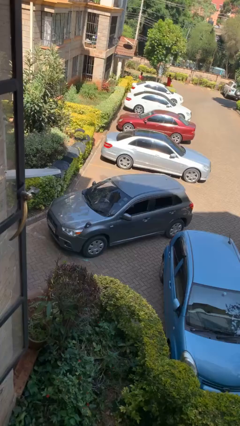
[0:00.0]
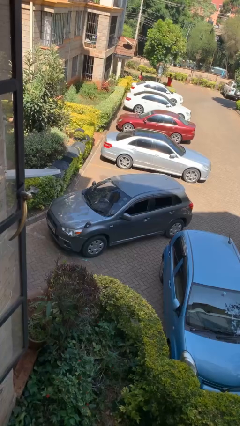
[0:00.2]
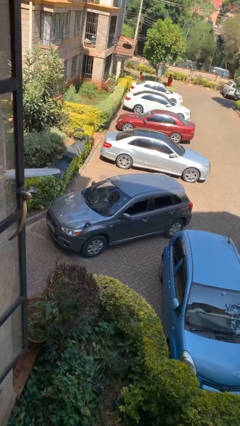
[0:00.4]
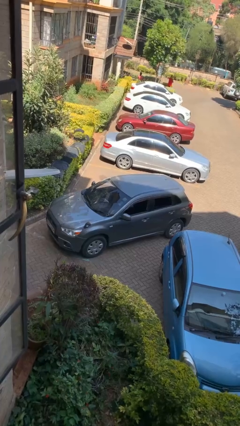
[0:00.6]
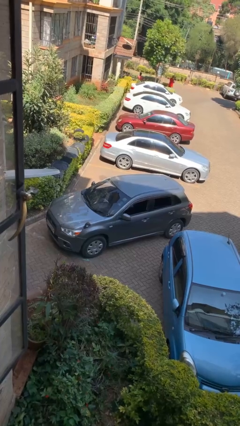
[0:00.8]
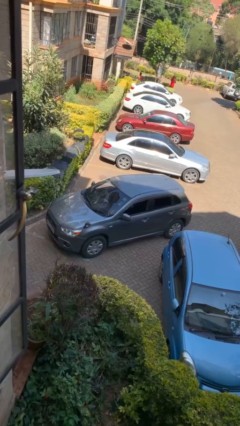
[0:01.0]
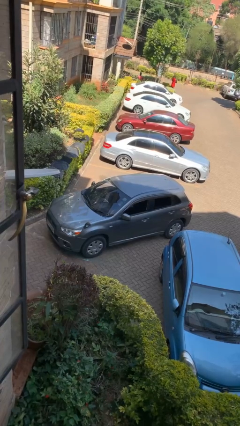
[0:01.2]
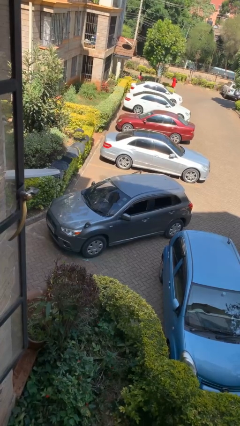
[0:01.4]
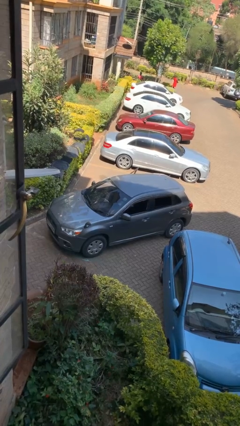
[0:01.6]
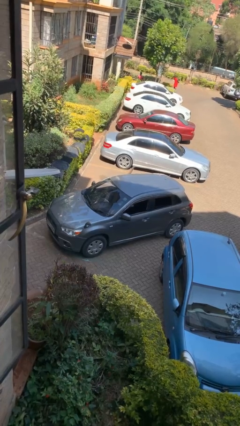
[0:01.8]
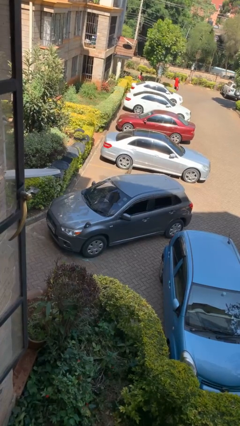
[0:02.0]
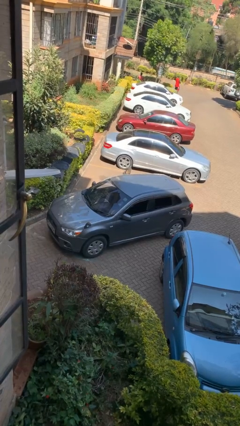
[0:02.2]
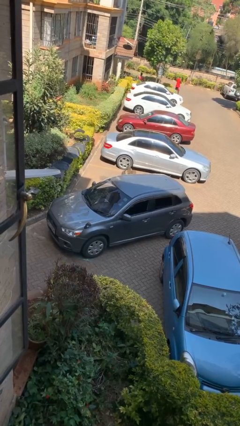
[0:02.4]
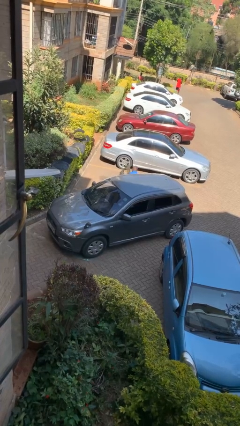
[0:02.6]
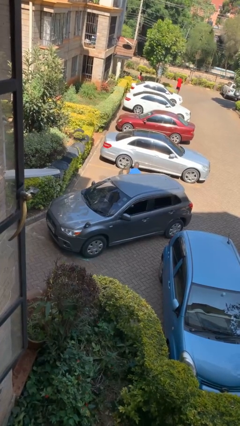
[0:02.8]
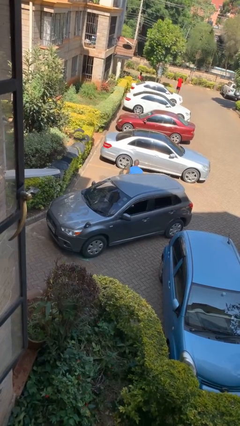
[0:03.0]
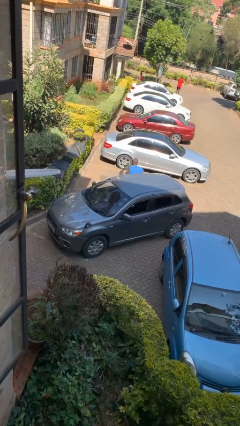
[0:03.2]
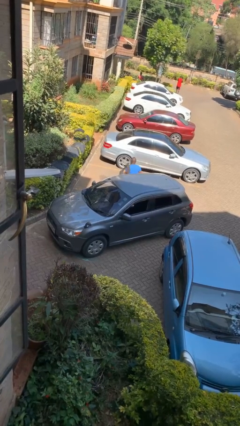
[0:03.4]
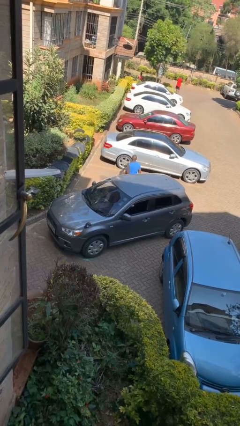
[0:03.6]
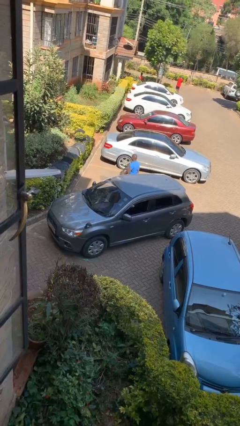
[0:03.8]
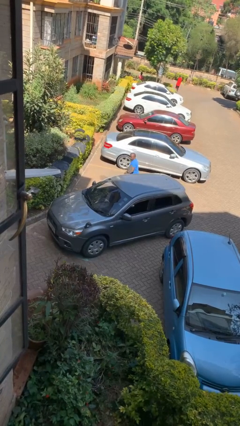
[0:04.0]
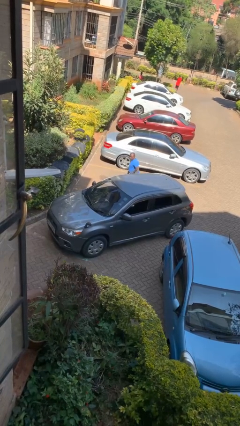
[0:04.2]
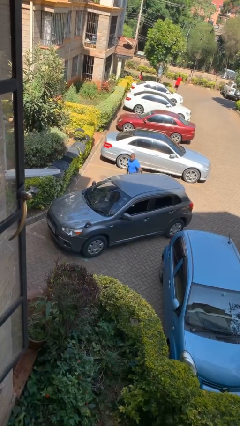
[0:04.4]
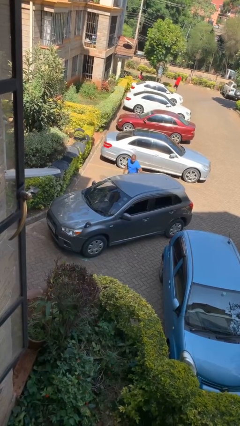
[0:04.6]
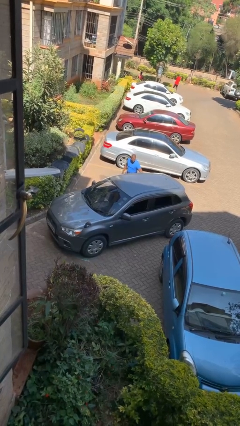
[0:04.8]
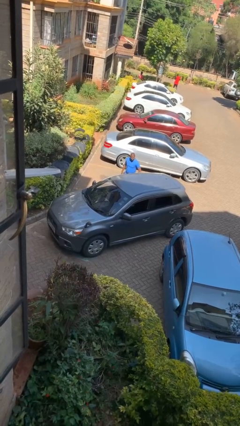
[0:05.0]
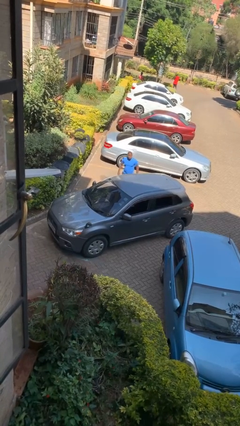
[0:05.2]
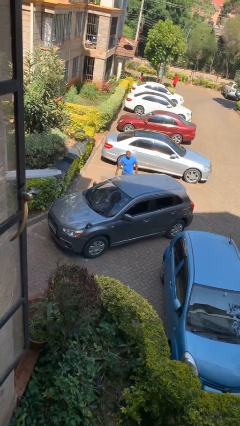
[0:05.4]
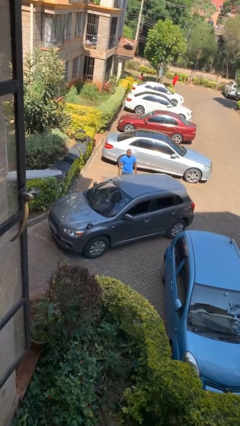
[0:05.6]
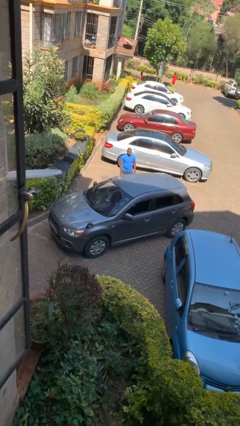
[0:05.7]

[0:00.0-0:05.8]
car drops off person

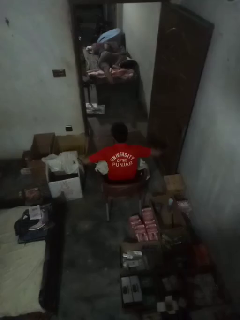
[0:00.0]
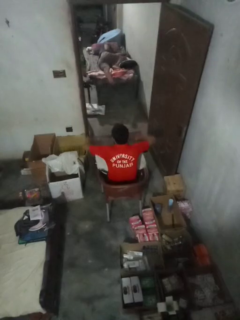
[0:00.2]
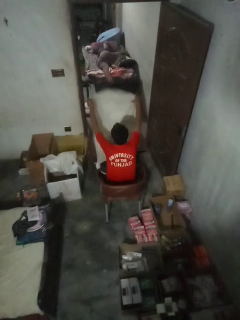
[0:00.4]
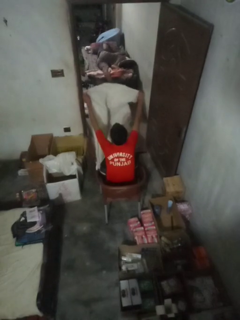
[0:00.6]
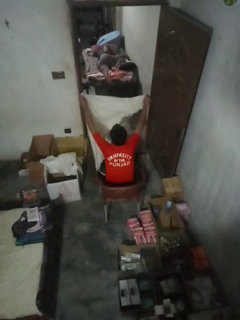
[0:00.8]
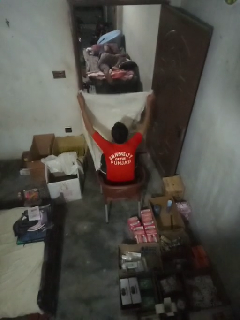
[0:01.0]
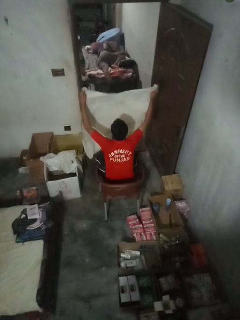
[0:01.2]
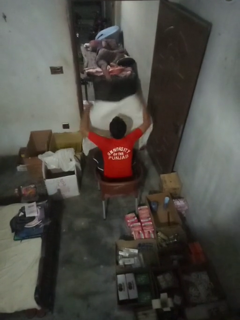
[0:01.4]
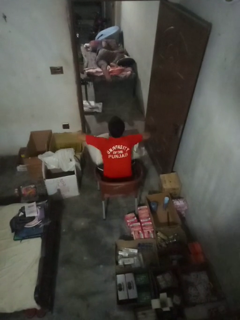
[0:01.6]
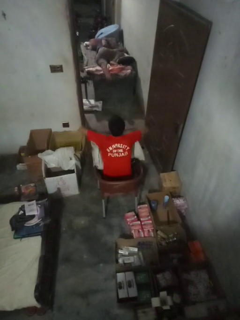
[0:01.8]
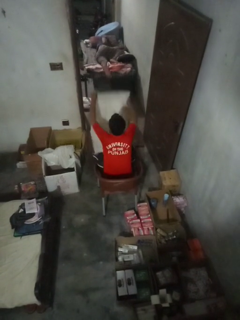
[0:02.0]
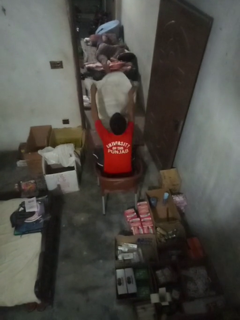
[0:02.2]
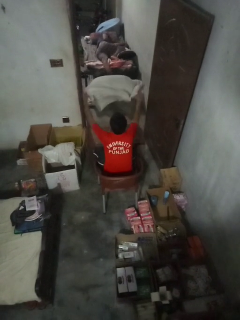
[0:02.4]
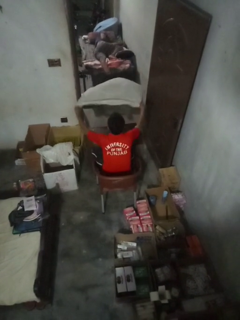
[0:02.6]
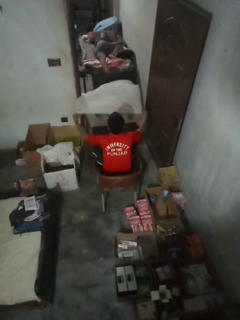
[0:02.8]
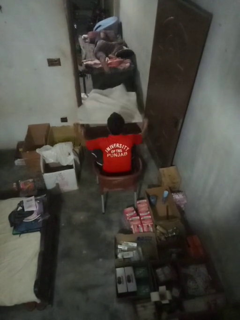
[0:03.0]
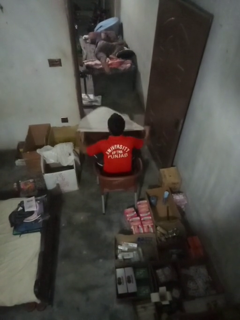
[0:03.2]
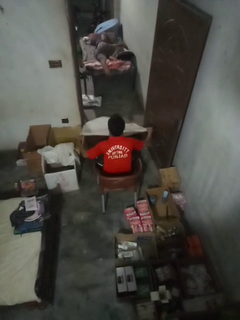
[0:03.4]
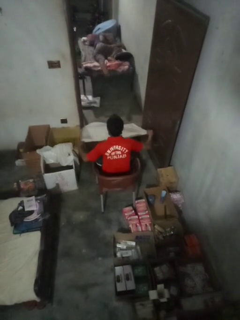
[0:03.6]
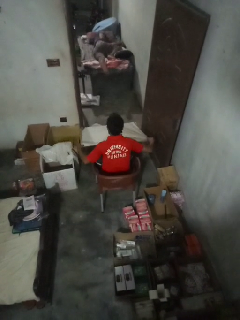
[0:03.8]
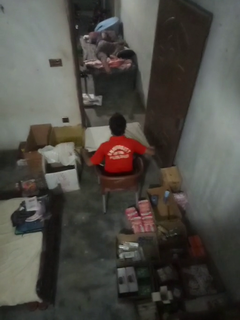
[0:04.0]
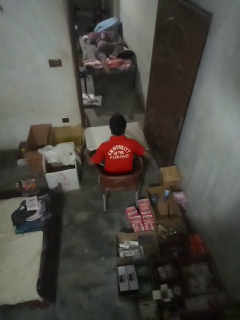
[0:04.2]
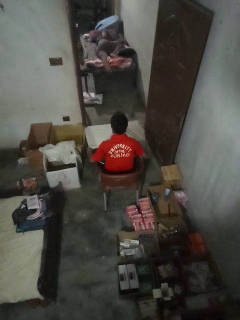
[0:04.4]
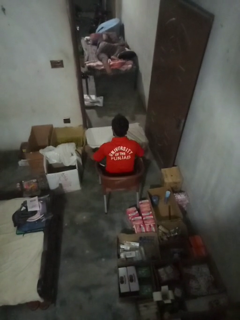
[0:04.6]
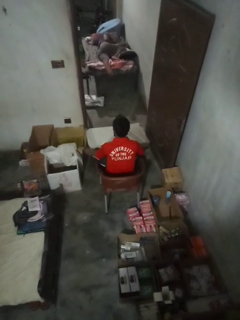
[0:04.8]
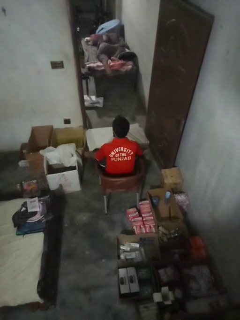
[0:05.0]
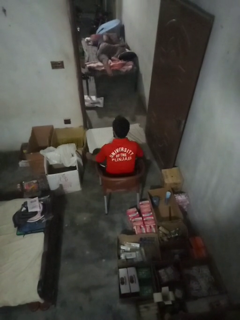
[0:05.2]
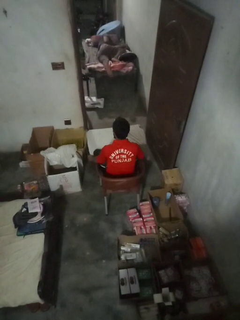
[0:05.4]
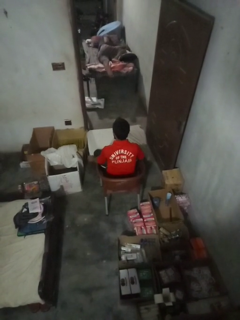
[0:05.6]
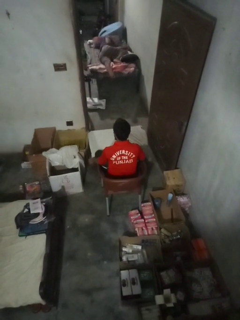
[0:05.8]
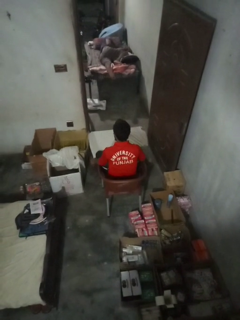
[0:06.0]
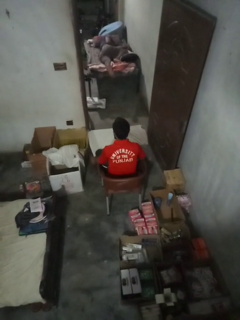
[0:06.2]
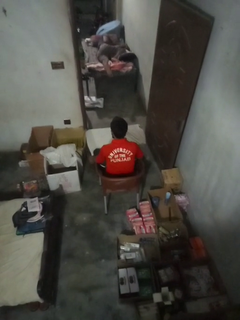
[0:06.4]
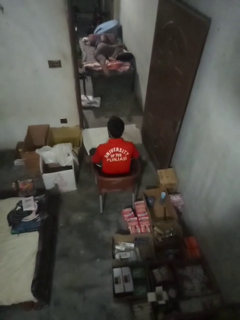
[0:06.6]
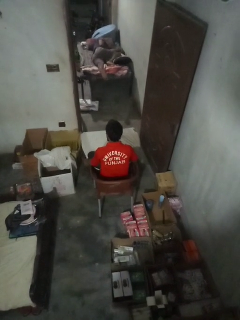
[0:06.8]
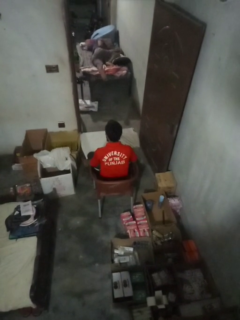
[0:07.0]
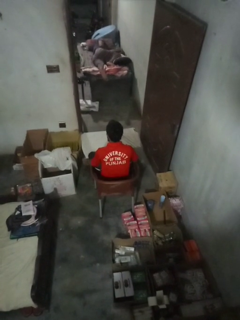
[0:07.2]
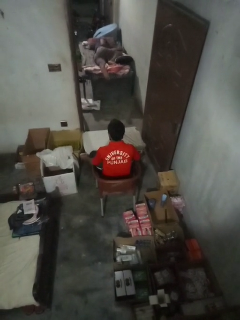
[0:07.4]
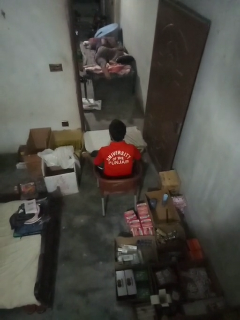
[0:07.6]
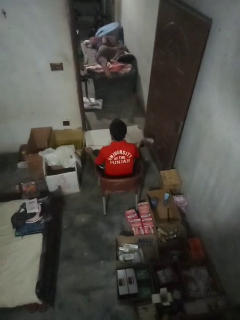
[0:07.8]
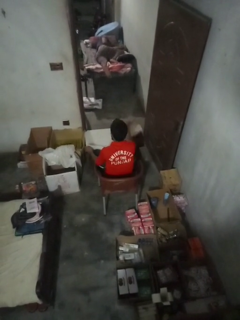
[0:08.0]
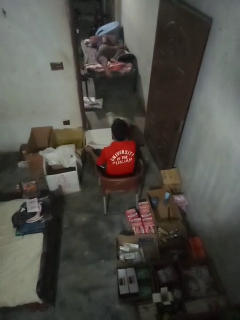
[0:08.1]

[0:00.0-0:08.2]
person spreads tablecloth

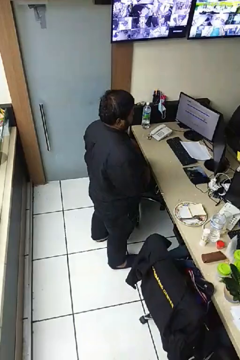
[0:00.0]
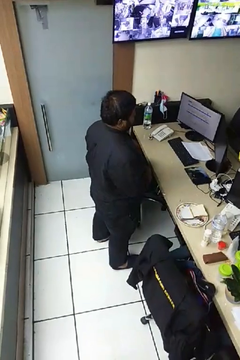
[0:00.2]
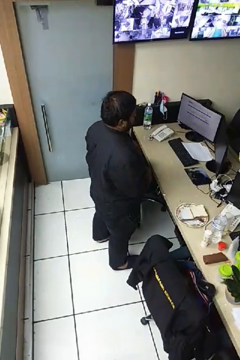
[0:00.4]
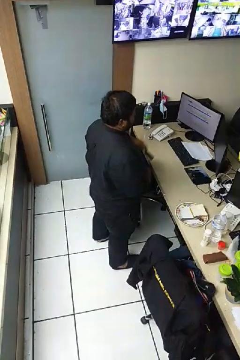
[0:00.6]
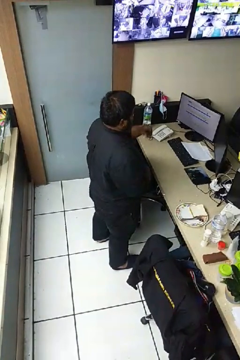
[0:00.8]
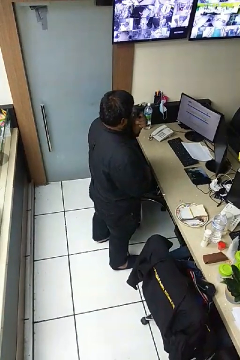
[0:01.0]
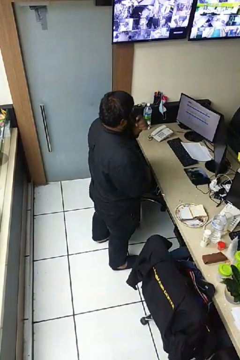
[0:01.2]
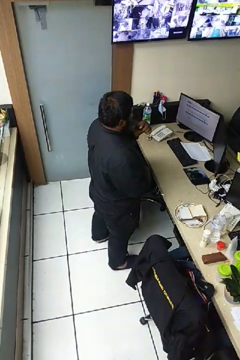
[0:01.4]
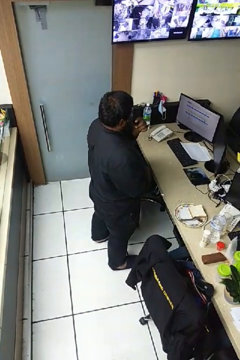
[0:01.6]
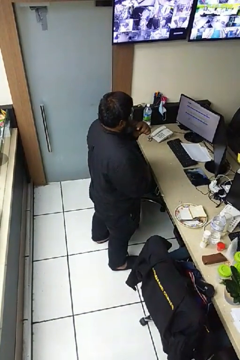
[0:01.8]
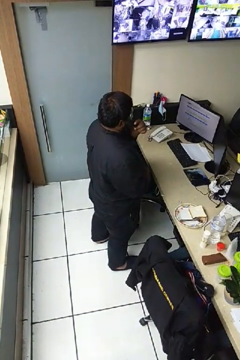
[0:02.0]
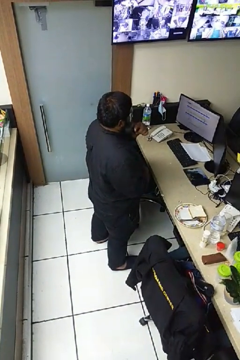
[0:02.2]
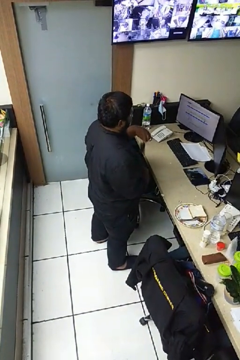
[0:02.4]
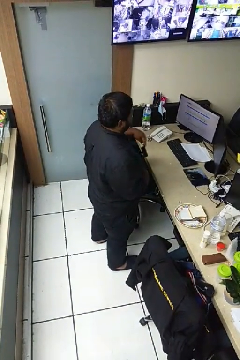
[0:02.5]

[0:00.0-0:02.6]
person brushes hair

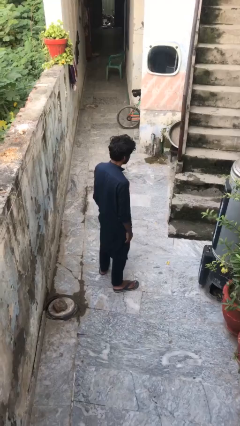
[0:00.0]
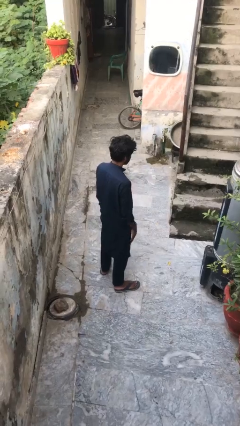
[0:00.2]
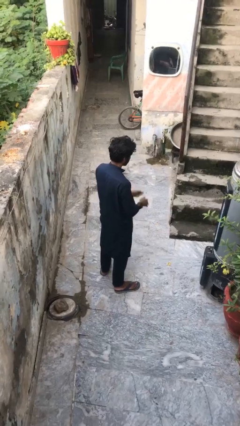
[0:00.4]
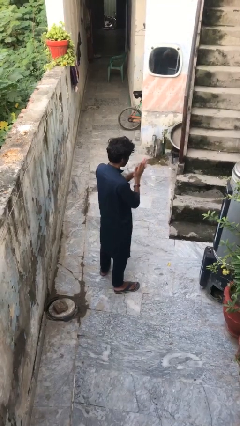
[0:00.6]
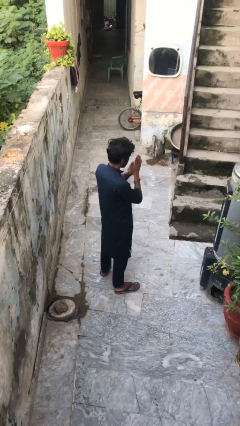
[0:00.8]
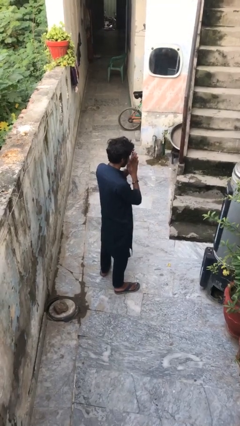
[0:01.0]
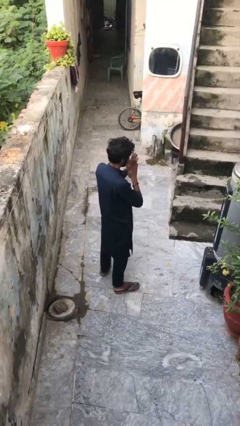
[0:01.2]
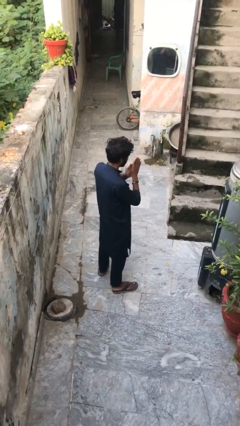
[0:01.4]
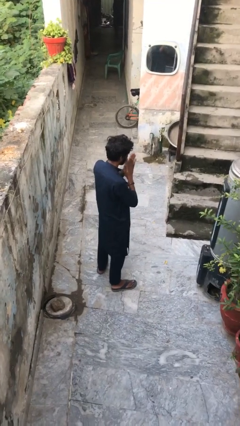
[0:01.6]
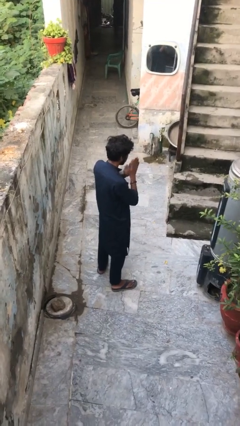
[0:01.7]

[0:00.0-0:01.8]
person blows into hands

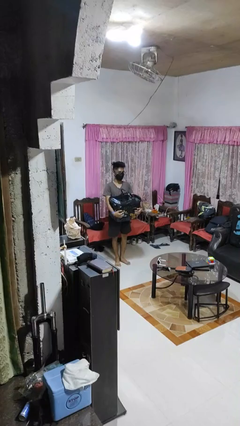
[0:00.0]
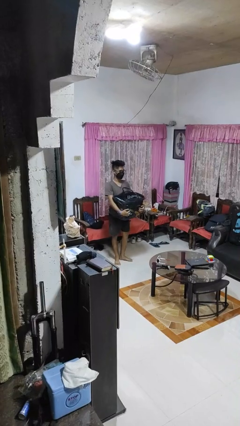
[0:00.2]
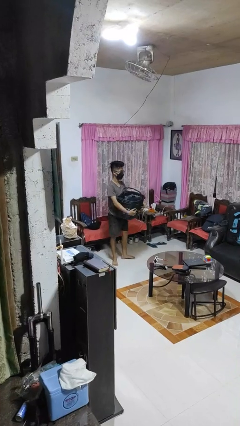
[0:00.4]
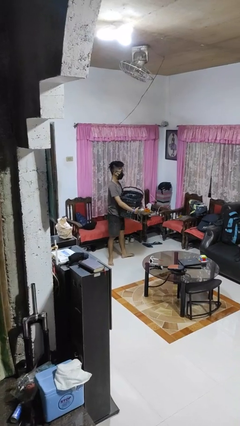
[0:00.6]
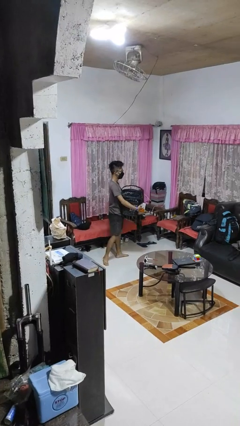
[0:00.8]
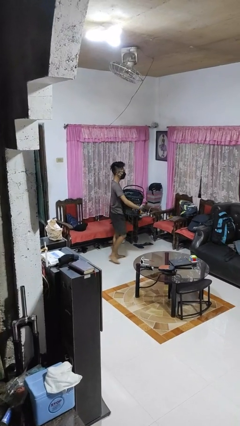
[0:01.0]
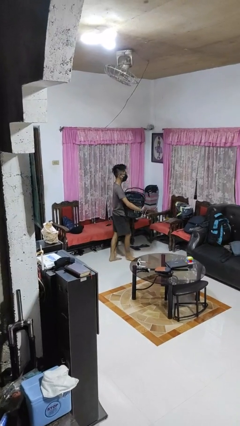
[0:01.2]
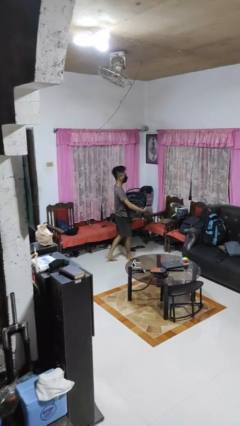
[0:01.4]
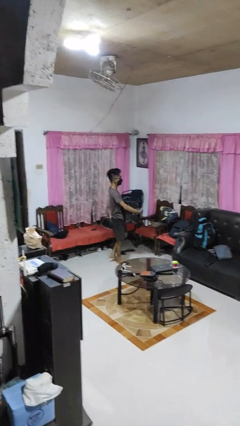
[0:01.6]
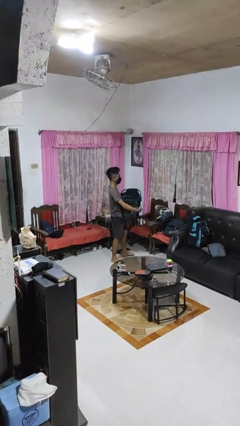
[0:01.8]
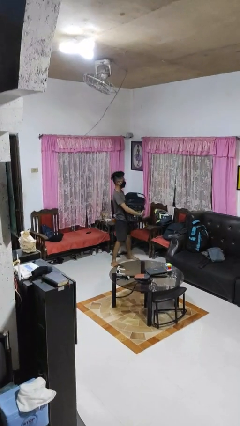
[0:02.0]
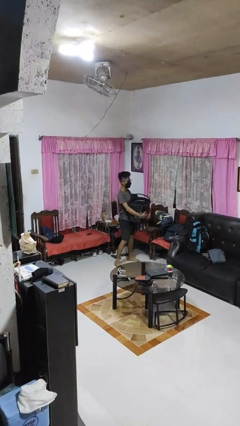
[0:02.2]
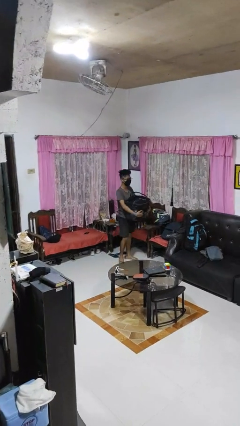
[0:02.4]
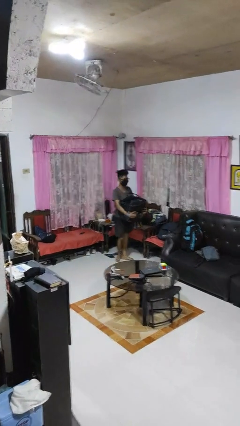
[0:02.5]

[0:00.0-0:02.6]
person carries laundry basket
